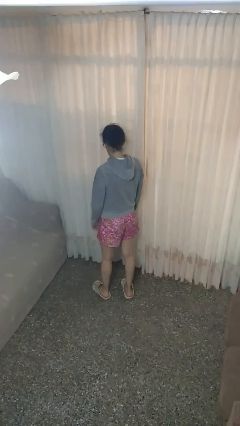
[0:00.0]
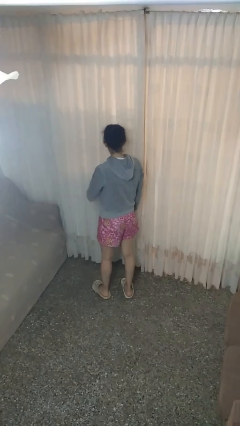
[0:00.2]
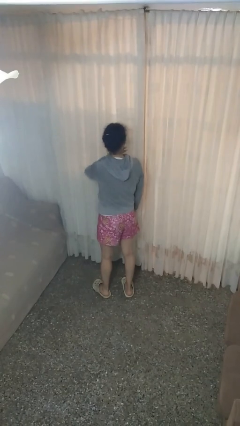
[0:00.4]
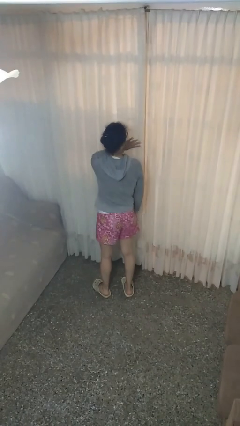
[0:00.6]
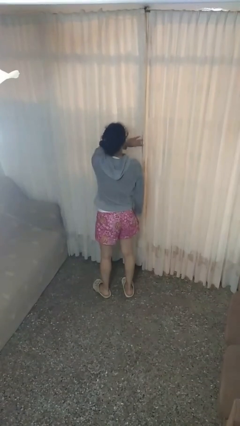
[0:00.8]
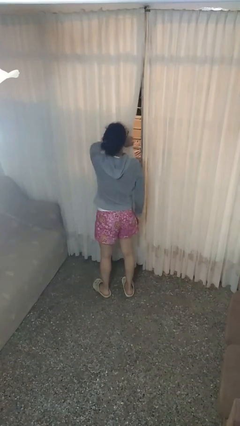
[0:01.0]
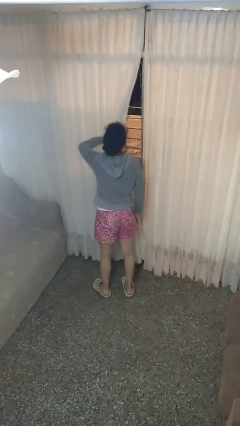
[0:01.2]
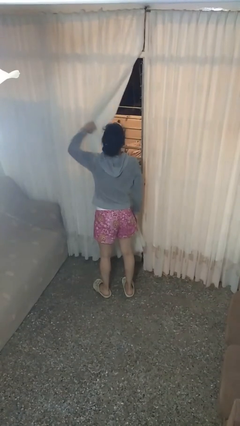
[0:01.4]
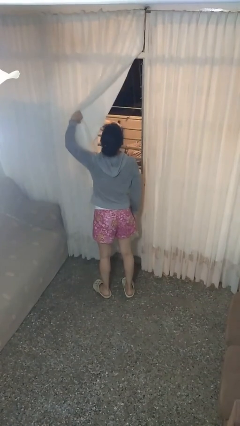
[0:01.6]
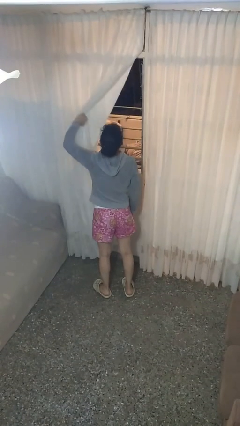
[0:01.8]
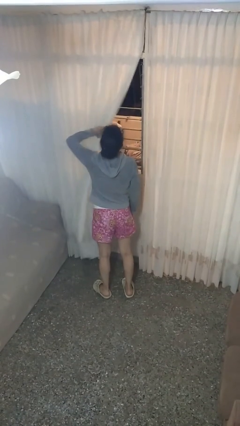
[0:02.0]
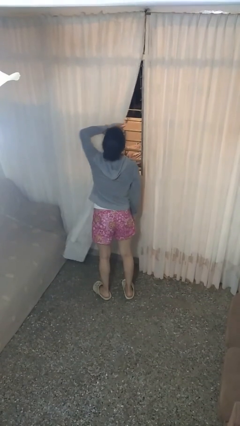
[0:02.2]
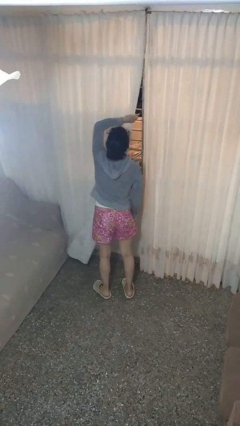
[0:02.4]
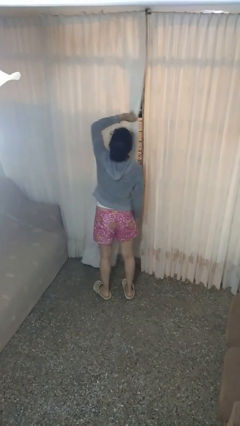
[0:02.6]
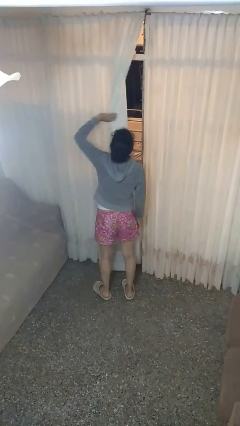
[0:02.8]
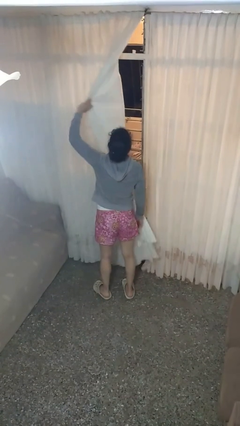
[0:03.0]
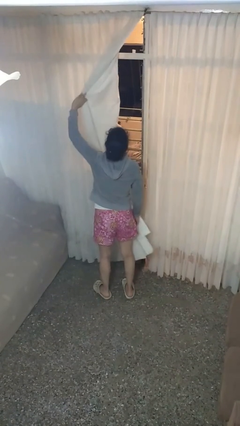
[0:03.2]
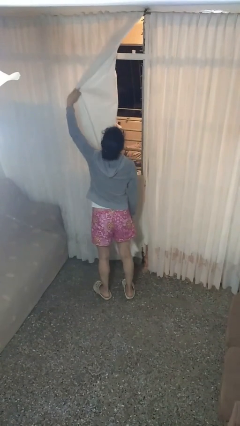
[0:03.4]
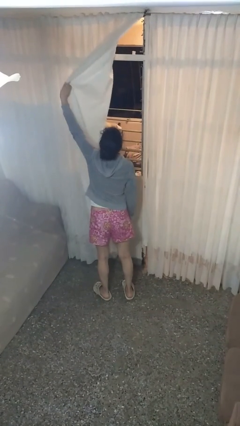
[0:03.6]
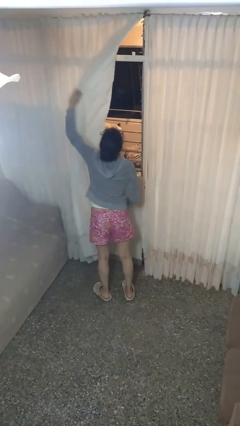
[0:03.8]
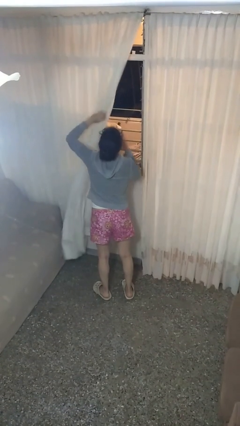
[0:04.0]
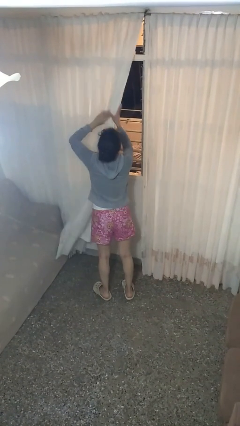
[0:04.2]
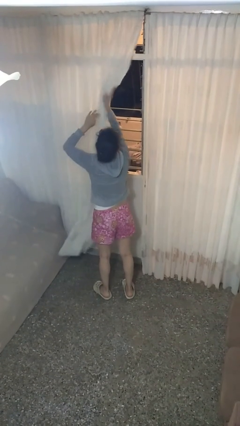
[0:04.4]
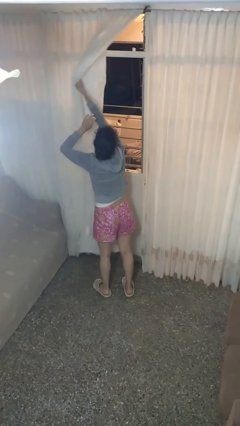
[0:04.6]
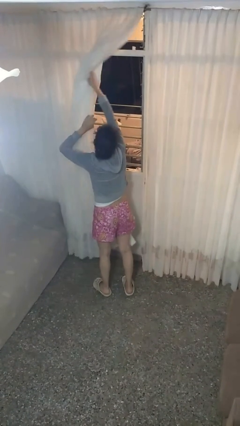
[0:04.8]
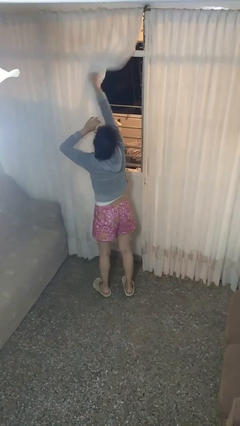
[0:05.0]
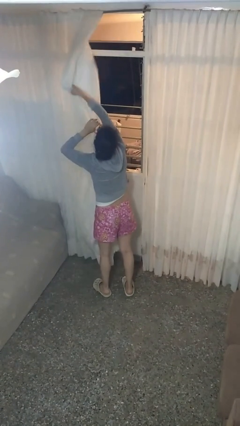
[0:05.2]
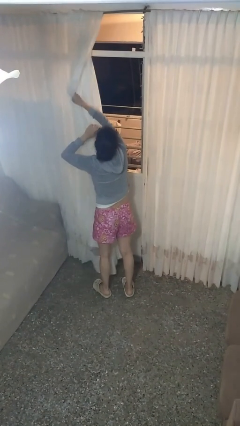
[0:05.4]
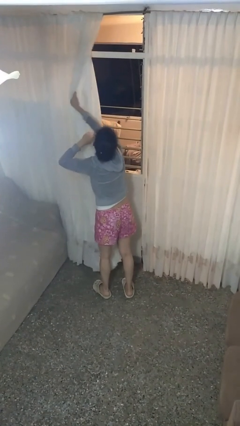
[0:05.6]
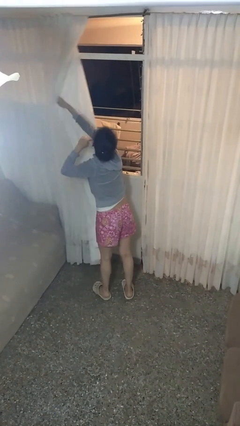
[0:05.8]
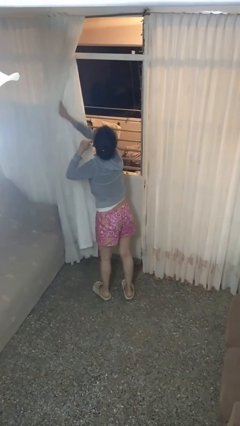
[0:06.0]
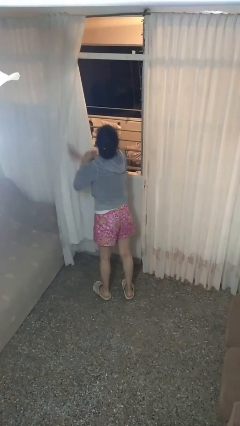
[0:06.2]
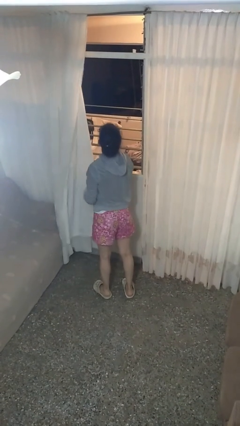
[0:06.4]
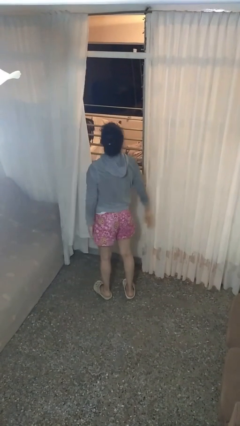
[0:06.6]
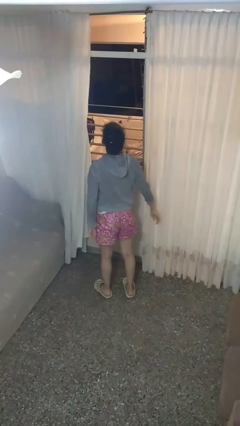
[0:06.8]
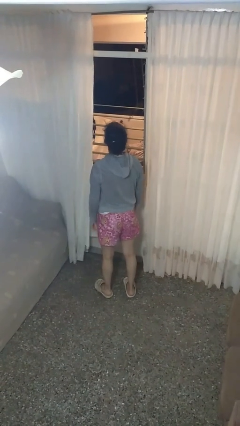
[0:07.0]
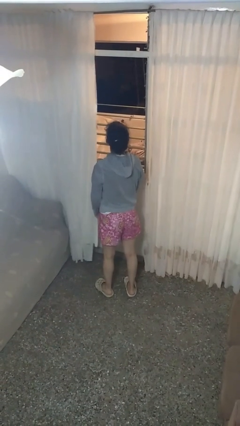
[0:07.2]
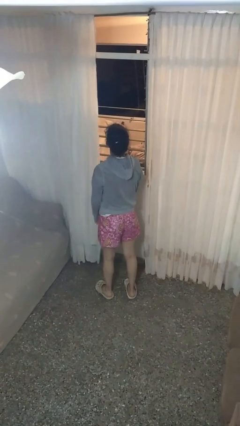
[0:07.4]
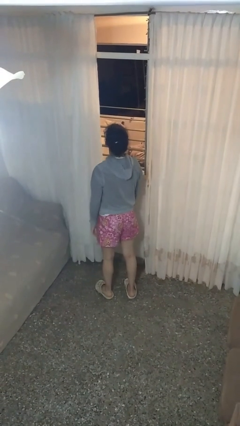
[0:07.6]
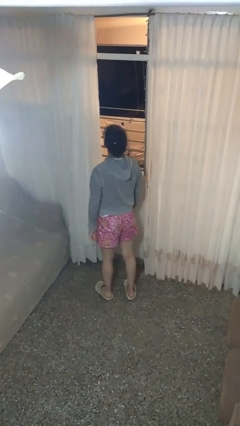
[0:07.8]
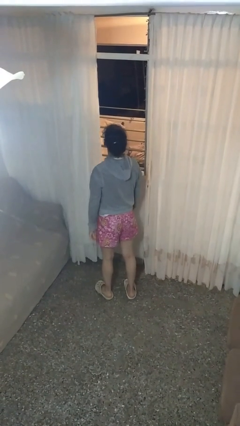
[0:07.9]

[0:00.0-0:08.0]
person opens curtains

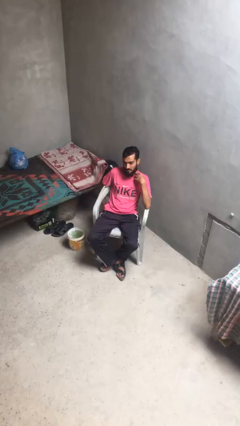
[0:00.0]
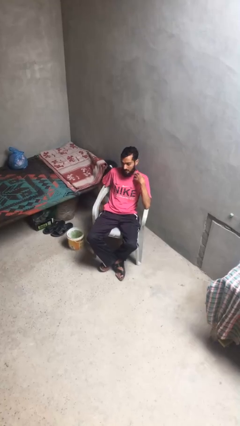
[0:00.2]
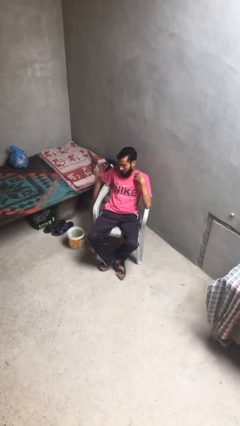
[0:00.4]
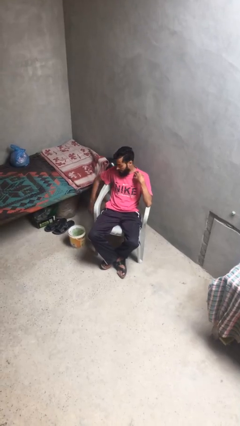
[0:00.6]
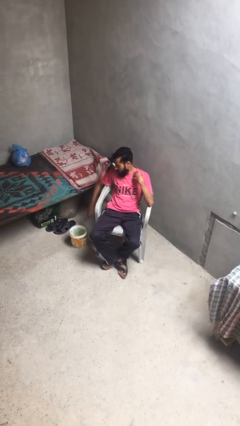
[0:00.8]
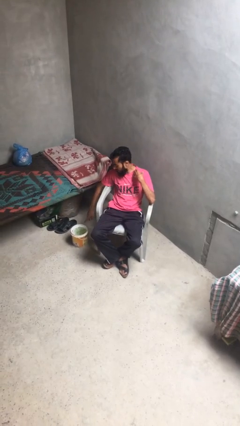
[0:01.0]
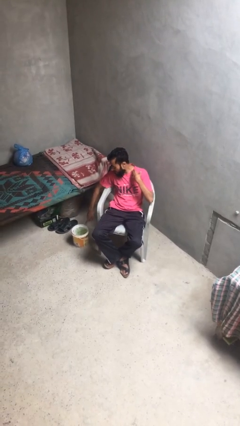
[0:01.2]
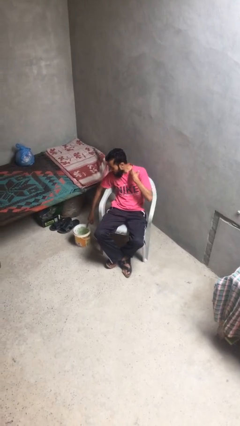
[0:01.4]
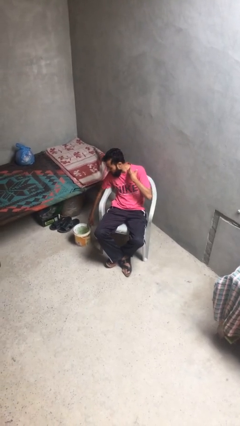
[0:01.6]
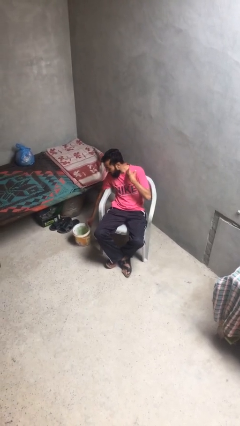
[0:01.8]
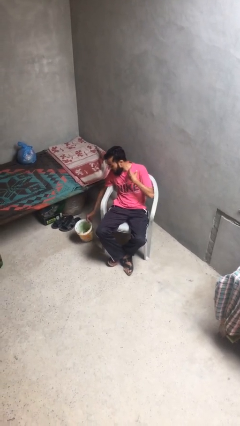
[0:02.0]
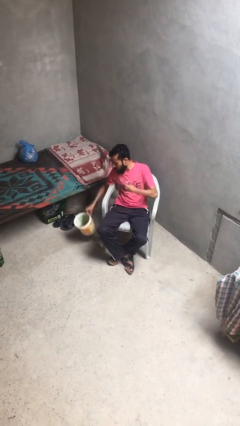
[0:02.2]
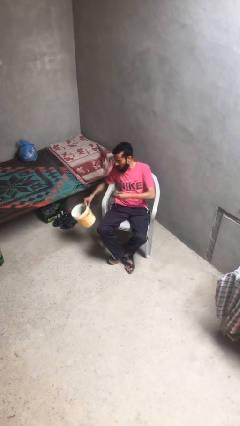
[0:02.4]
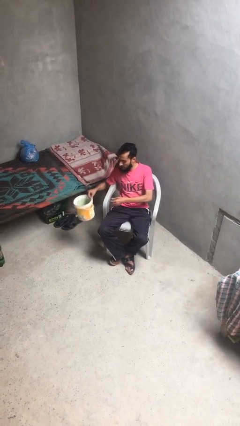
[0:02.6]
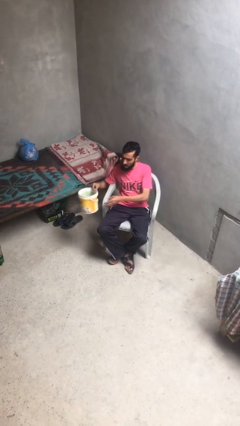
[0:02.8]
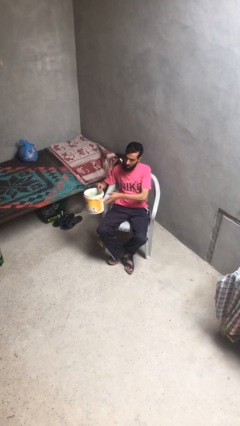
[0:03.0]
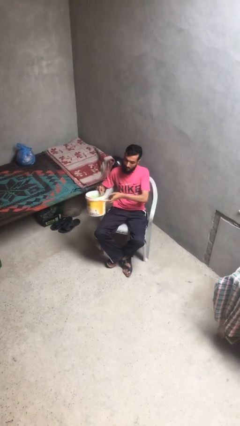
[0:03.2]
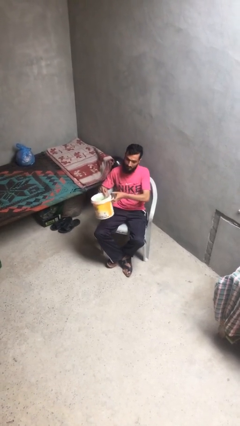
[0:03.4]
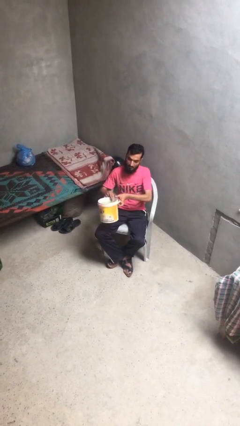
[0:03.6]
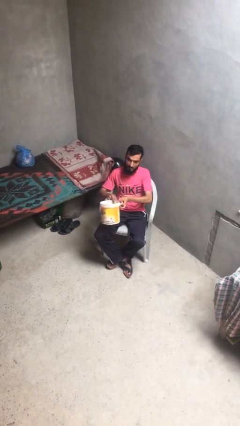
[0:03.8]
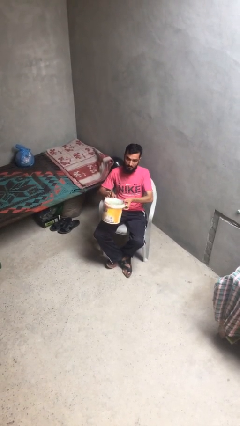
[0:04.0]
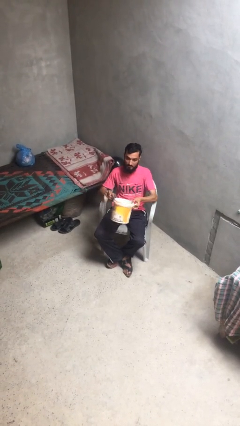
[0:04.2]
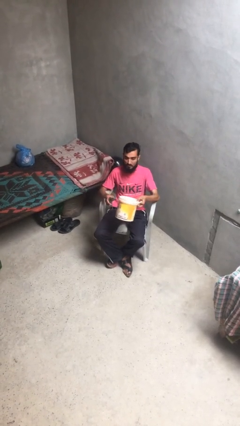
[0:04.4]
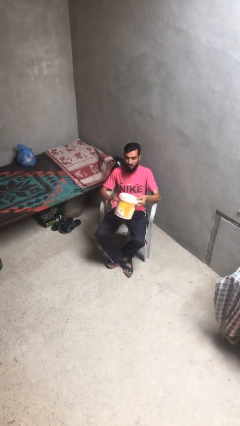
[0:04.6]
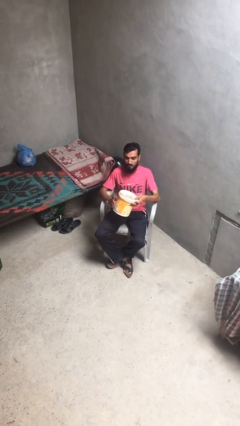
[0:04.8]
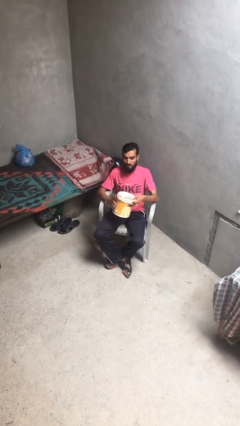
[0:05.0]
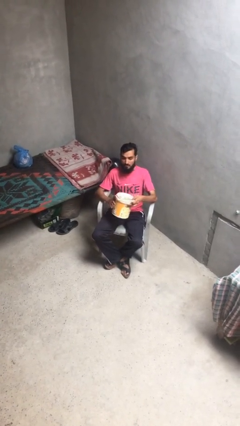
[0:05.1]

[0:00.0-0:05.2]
person picks up object from floor

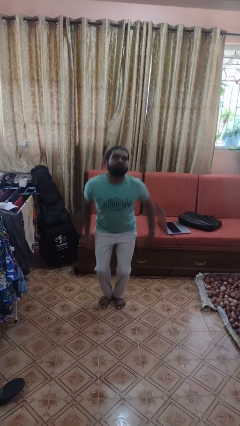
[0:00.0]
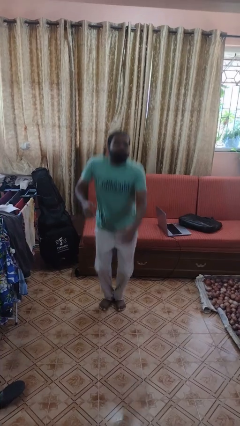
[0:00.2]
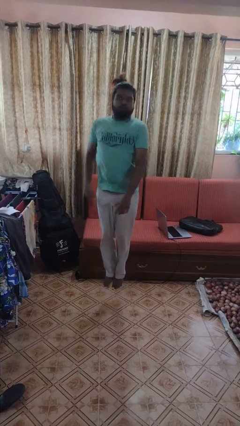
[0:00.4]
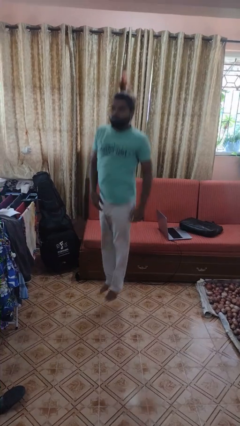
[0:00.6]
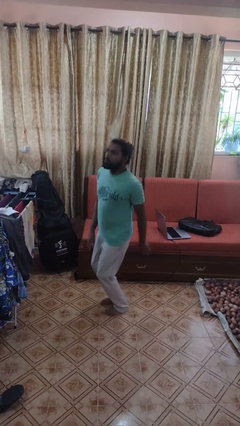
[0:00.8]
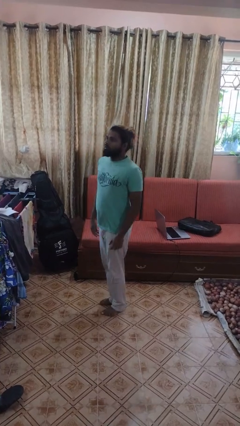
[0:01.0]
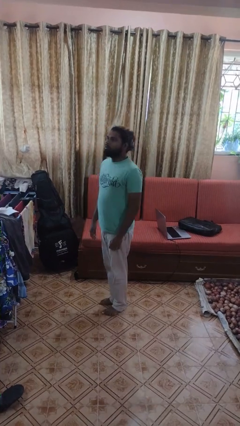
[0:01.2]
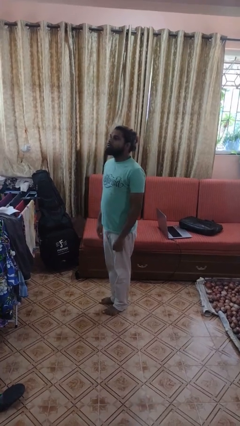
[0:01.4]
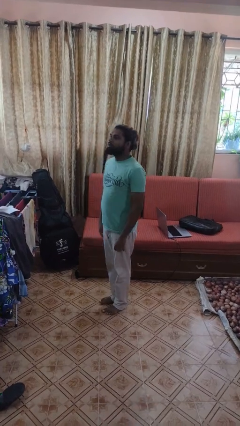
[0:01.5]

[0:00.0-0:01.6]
person jumps

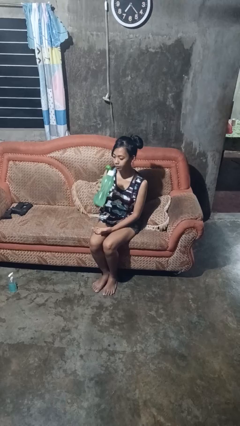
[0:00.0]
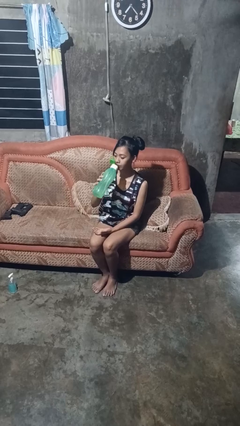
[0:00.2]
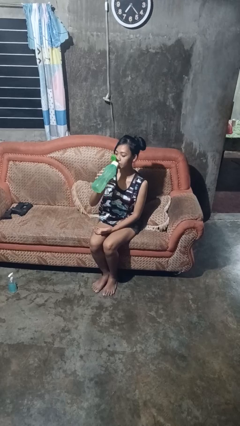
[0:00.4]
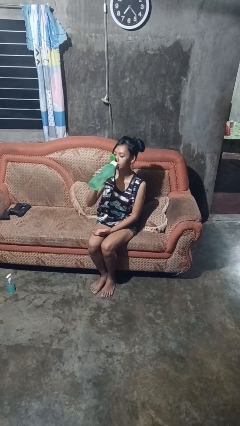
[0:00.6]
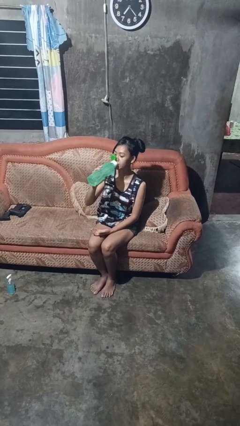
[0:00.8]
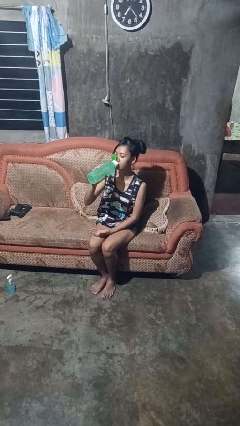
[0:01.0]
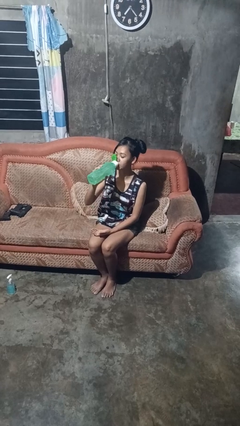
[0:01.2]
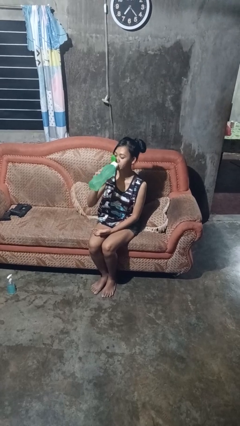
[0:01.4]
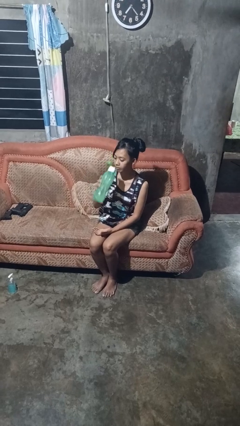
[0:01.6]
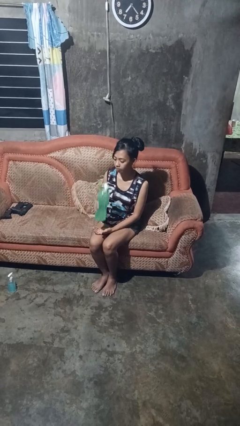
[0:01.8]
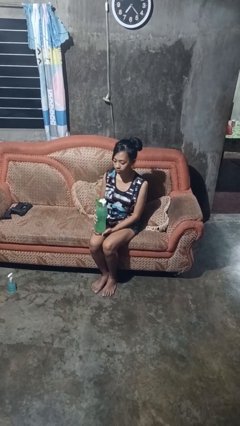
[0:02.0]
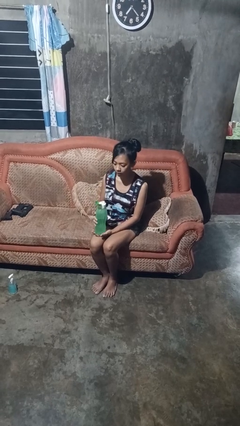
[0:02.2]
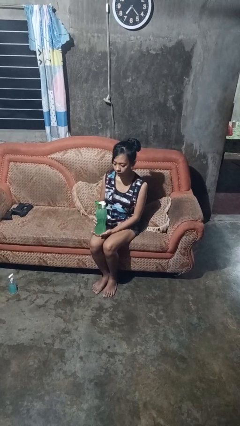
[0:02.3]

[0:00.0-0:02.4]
person drinks from bottle

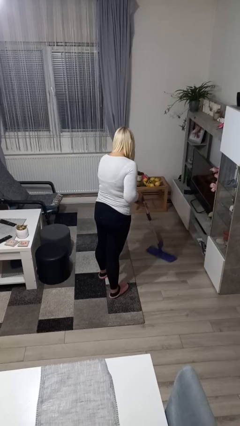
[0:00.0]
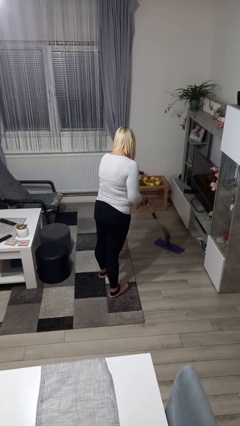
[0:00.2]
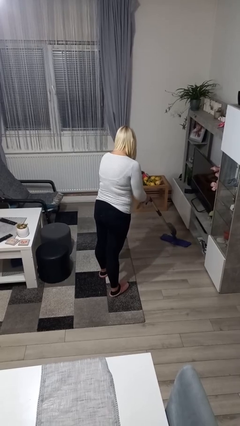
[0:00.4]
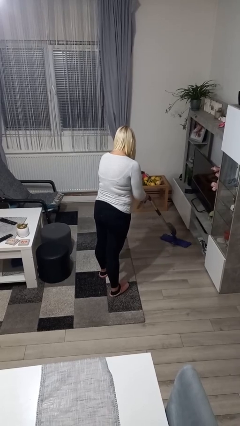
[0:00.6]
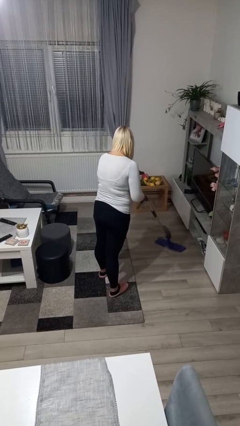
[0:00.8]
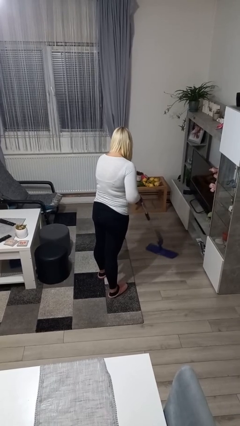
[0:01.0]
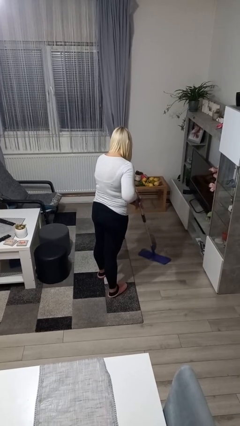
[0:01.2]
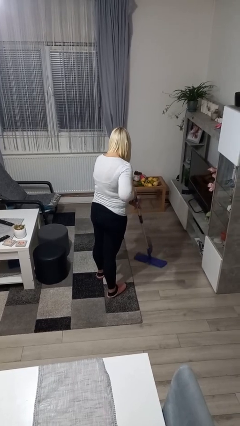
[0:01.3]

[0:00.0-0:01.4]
person mops
